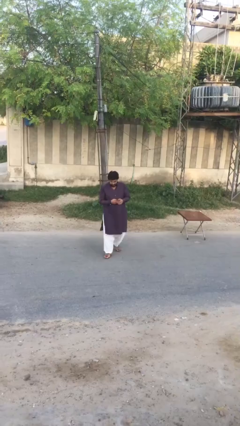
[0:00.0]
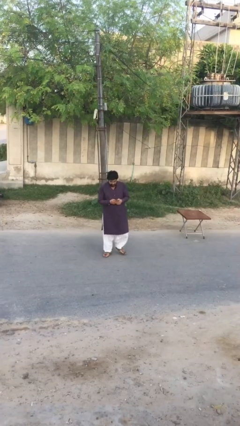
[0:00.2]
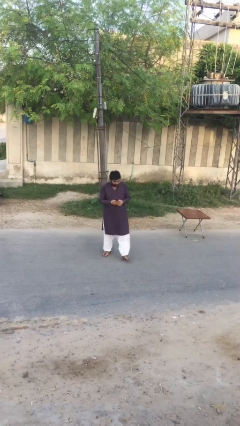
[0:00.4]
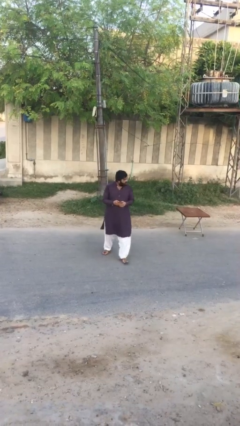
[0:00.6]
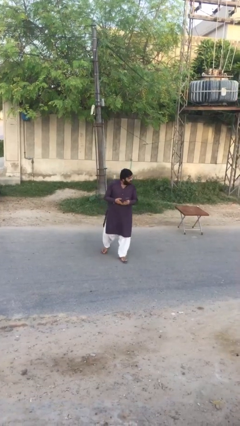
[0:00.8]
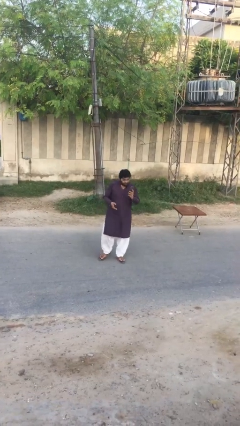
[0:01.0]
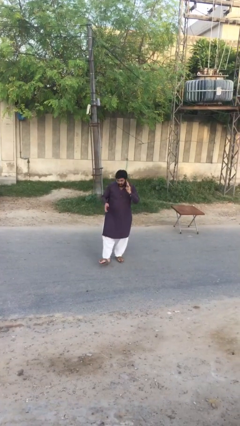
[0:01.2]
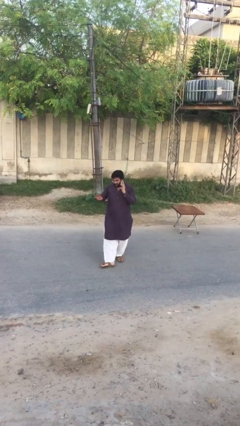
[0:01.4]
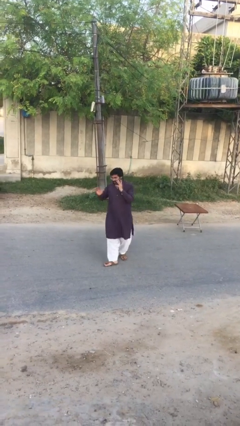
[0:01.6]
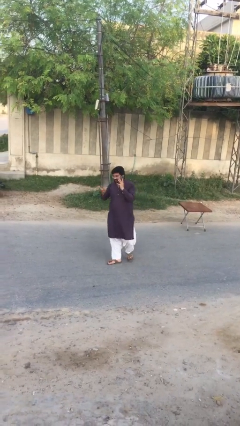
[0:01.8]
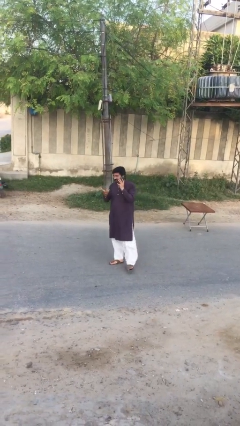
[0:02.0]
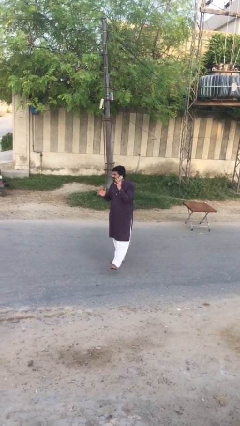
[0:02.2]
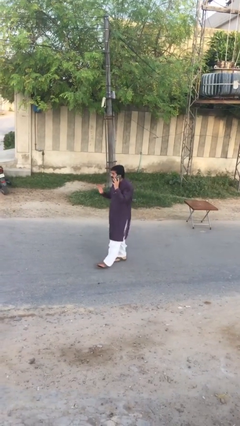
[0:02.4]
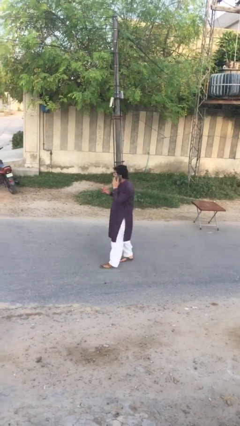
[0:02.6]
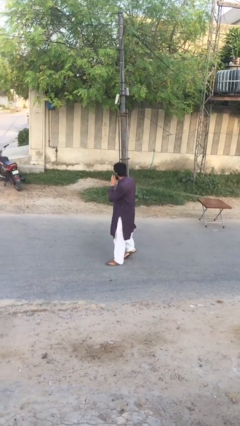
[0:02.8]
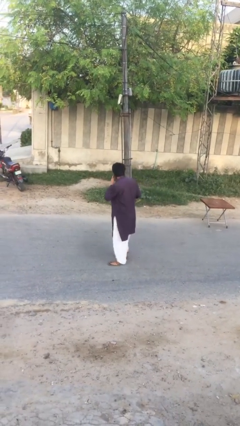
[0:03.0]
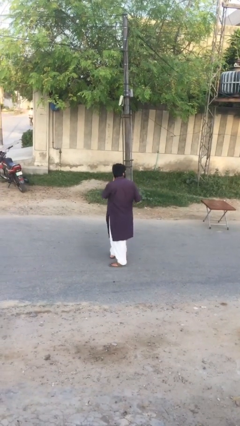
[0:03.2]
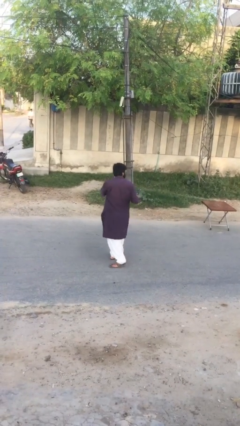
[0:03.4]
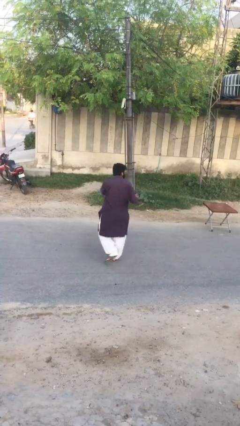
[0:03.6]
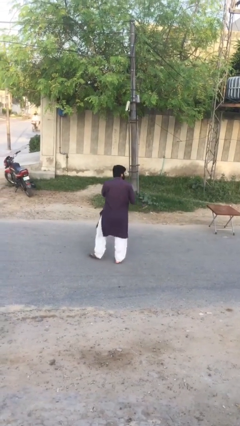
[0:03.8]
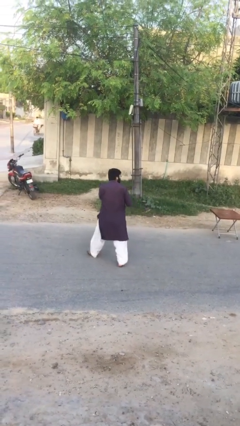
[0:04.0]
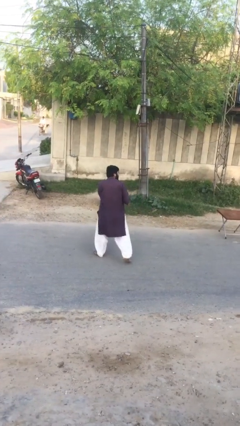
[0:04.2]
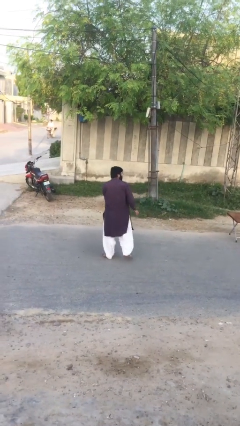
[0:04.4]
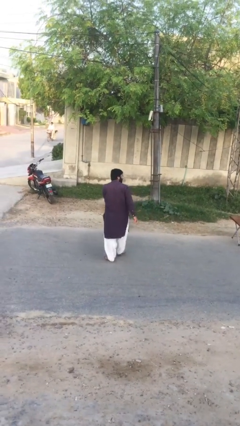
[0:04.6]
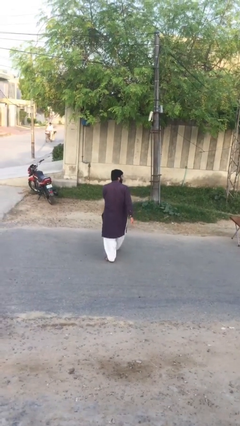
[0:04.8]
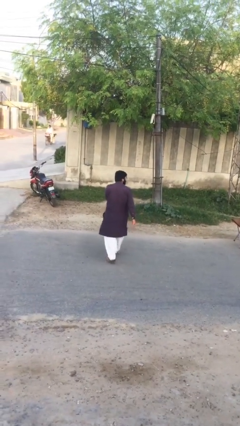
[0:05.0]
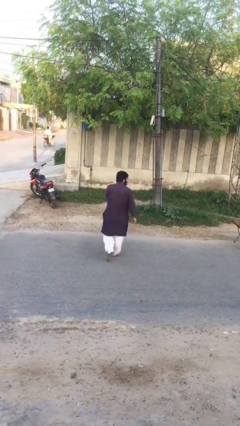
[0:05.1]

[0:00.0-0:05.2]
person talks on phone

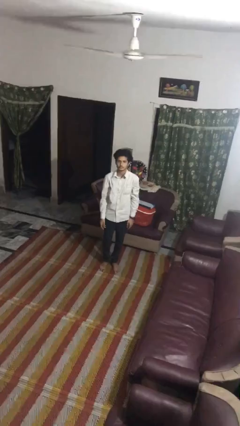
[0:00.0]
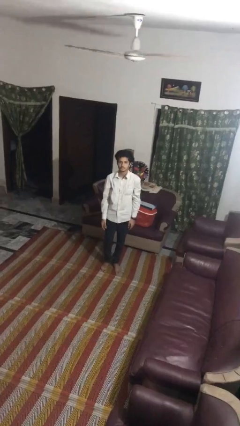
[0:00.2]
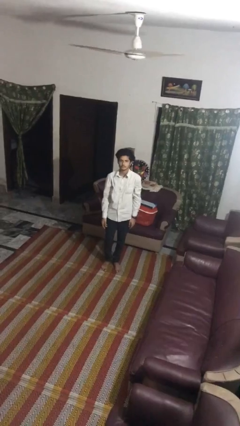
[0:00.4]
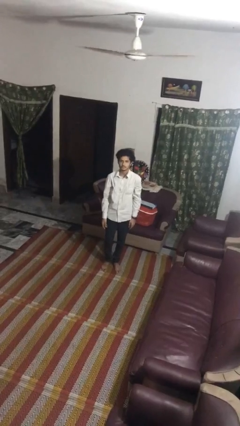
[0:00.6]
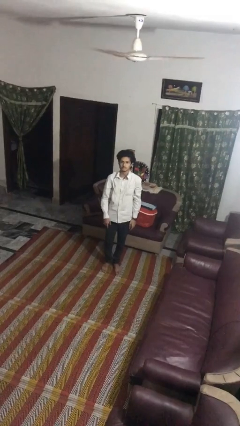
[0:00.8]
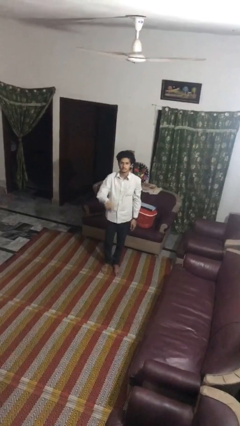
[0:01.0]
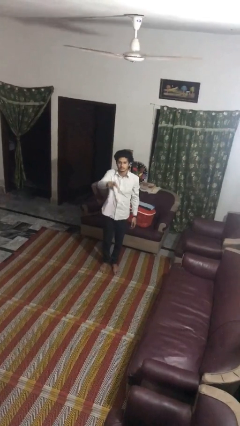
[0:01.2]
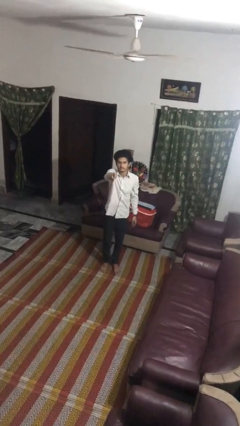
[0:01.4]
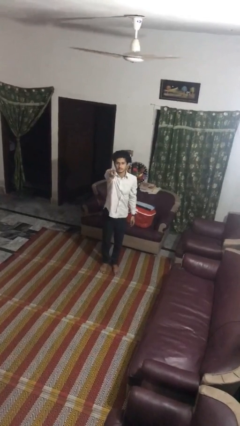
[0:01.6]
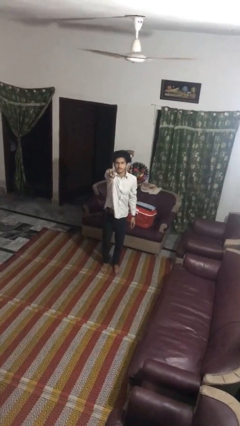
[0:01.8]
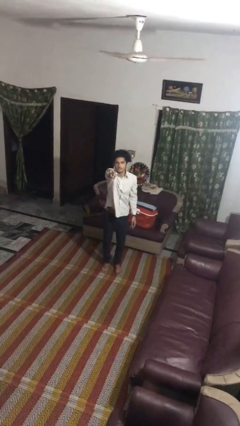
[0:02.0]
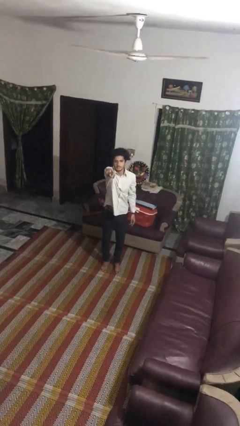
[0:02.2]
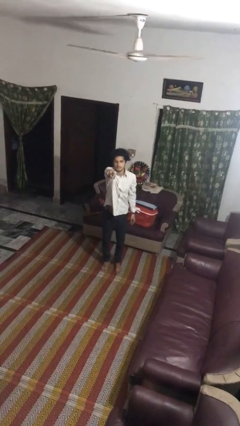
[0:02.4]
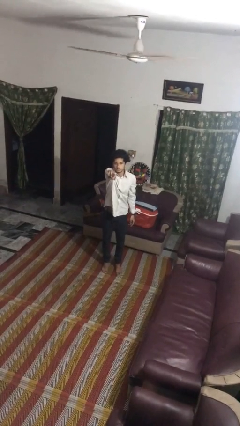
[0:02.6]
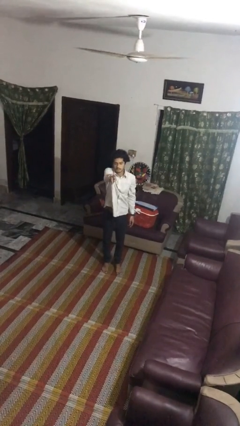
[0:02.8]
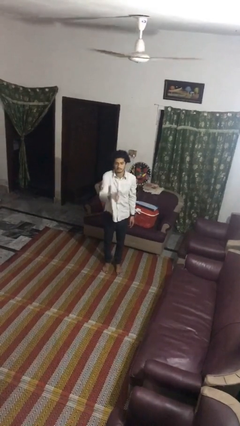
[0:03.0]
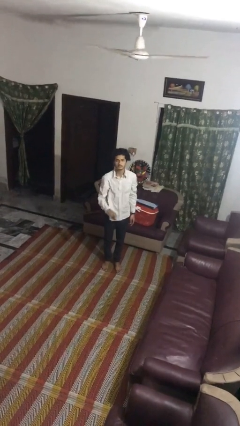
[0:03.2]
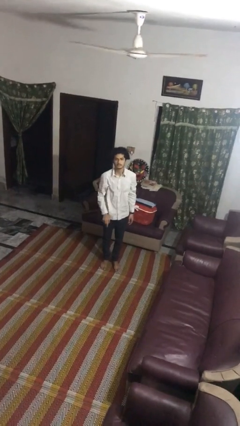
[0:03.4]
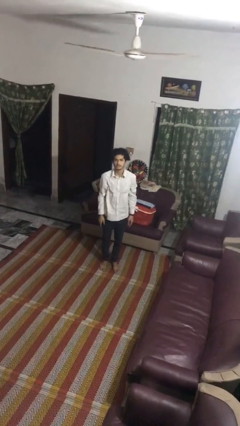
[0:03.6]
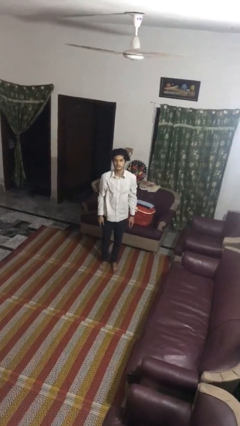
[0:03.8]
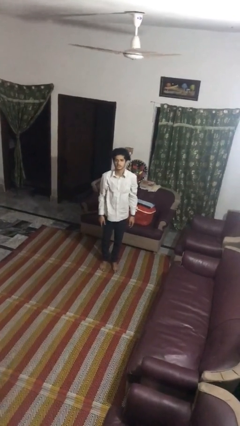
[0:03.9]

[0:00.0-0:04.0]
person points at person

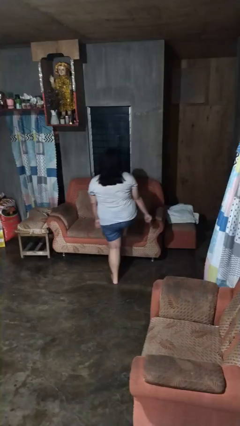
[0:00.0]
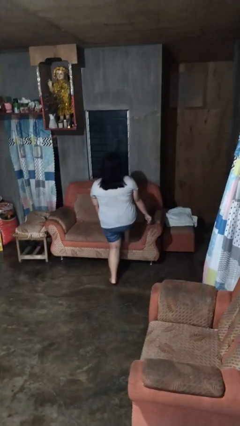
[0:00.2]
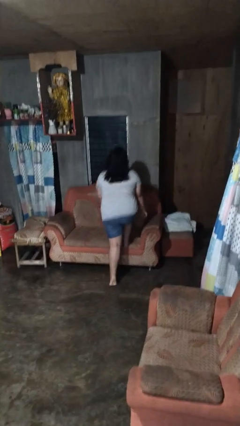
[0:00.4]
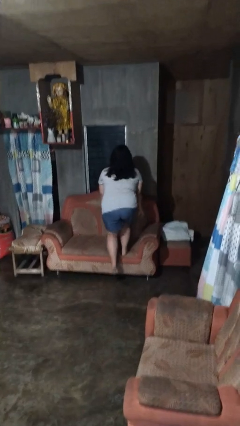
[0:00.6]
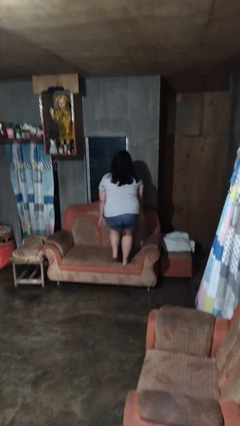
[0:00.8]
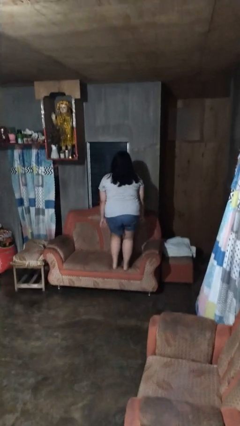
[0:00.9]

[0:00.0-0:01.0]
person climbs on couch

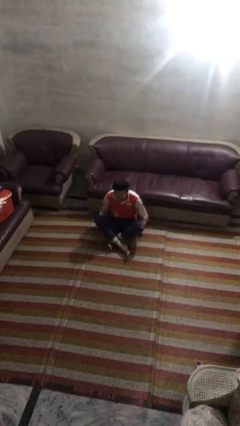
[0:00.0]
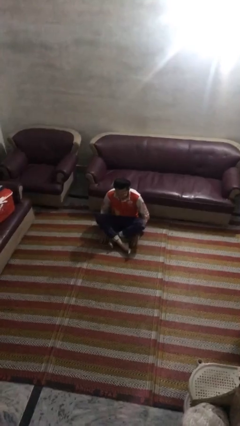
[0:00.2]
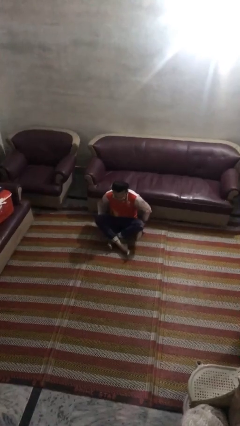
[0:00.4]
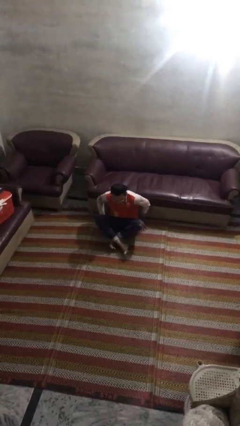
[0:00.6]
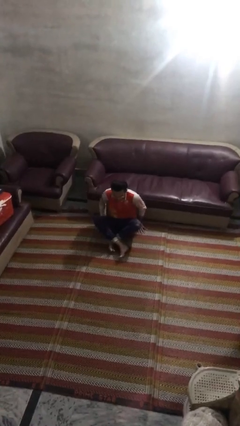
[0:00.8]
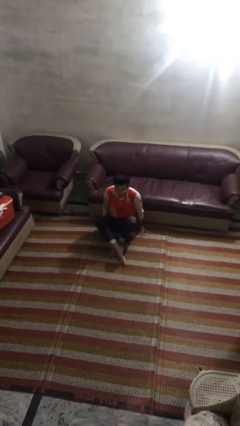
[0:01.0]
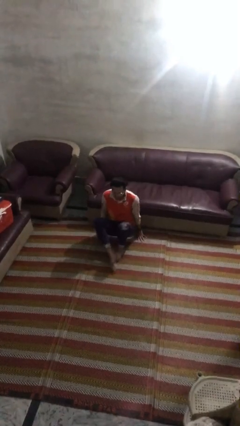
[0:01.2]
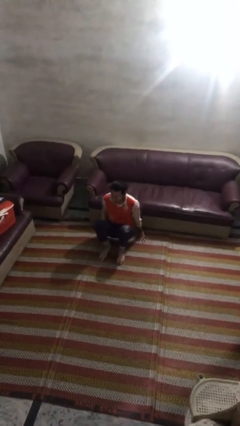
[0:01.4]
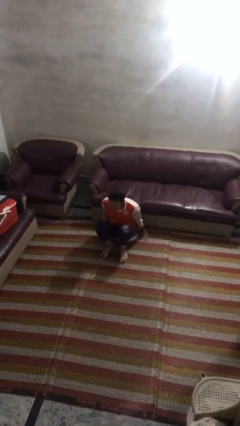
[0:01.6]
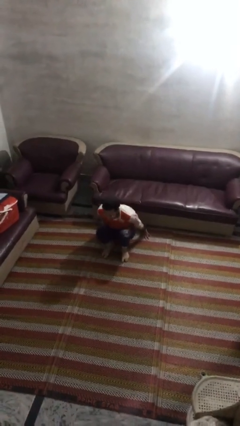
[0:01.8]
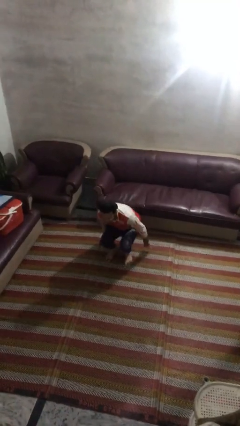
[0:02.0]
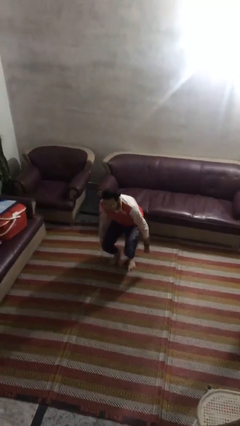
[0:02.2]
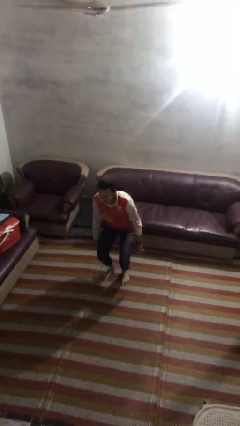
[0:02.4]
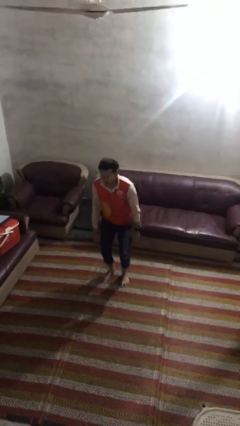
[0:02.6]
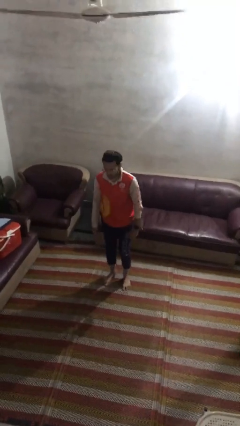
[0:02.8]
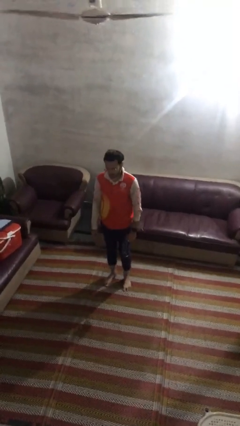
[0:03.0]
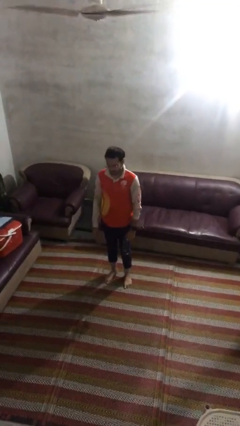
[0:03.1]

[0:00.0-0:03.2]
person stands up from floor

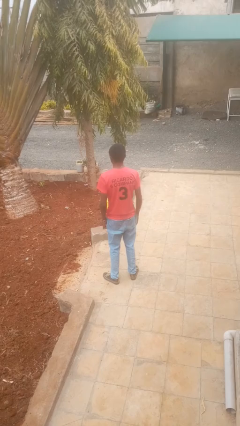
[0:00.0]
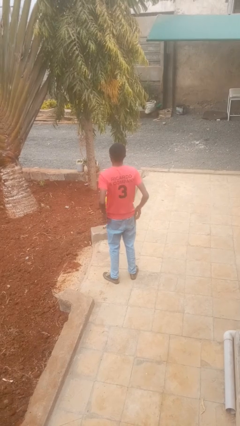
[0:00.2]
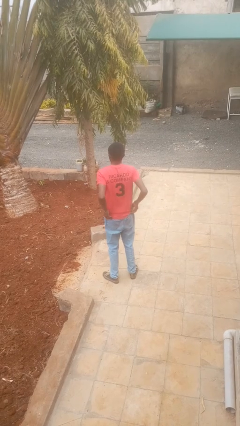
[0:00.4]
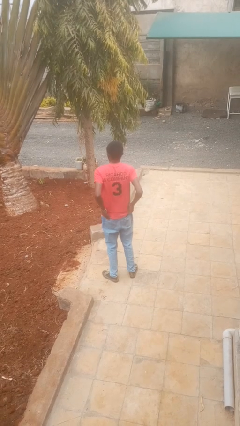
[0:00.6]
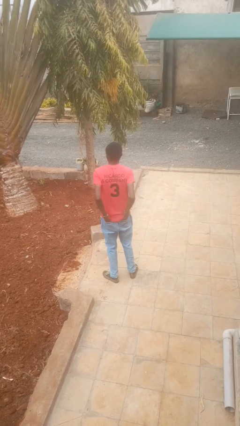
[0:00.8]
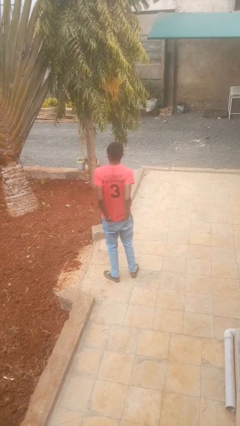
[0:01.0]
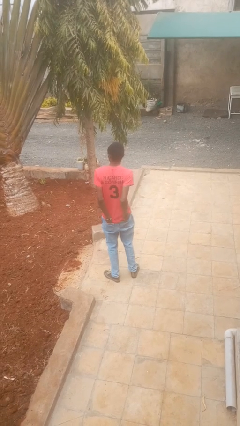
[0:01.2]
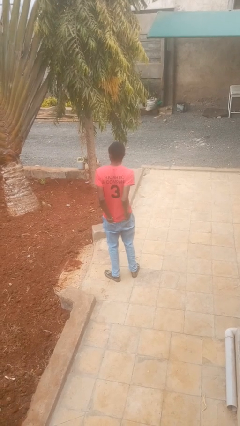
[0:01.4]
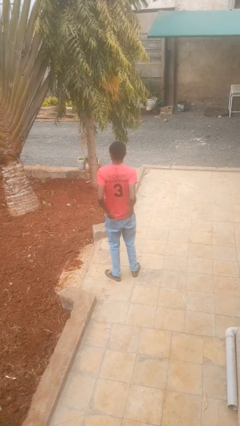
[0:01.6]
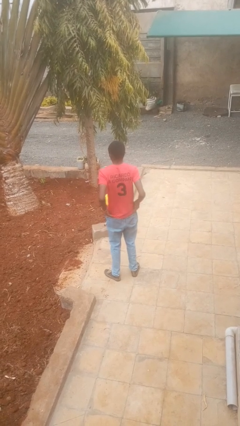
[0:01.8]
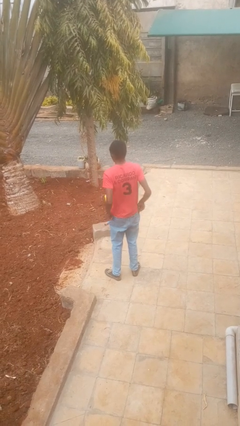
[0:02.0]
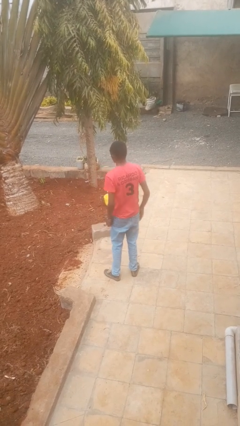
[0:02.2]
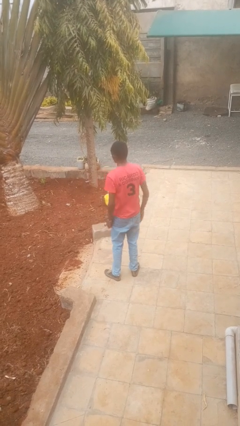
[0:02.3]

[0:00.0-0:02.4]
person puts hands in back pockets

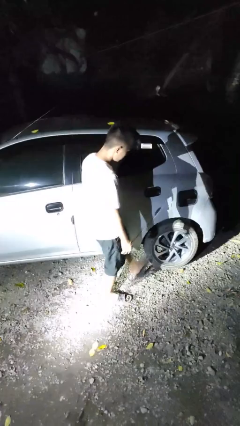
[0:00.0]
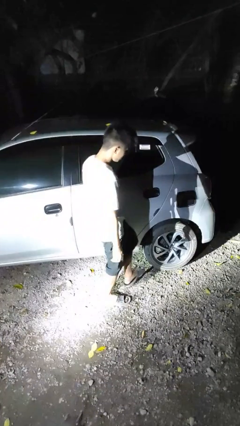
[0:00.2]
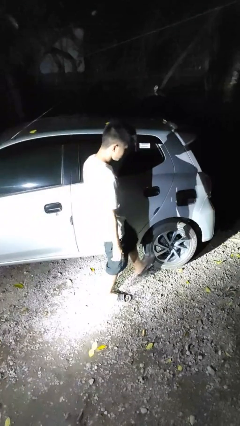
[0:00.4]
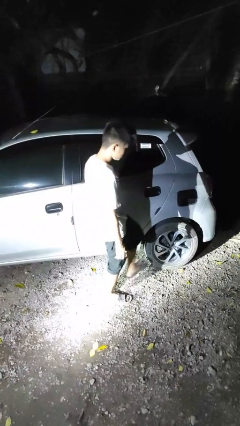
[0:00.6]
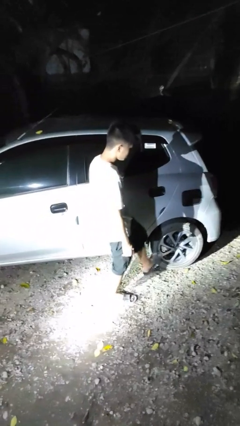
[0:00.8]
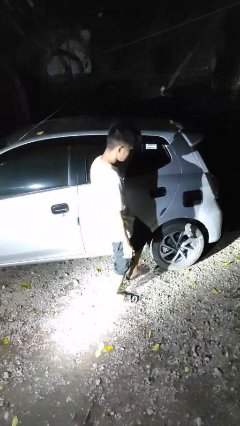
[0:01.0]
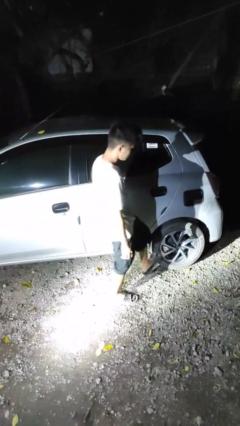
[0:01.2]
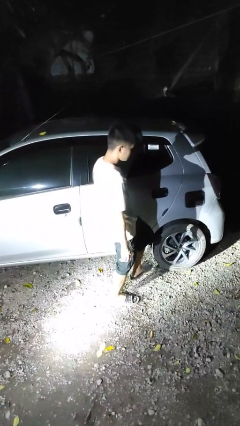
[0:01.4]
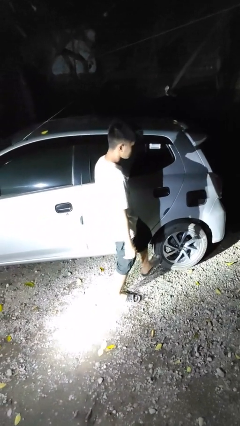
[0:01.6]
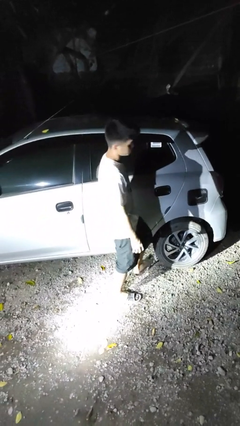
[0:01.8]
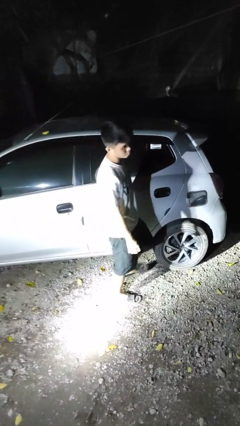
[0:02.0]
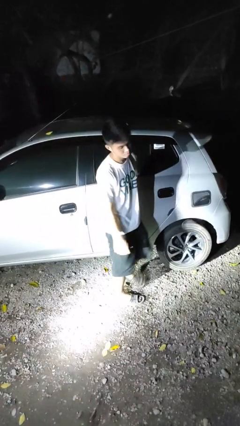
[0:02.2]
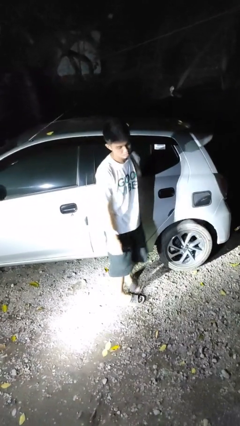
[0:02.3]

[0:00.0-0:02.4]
person kicks car tires
